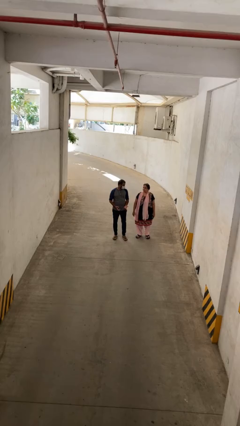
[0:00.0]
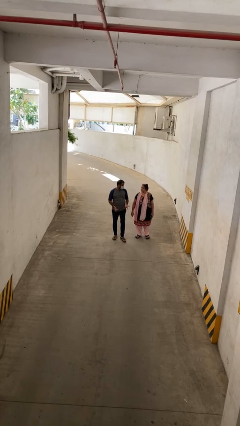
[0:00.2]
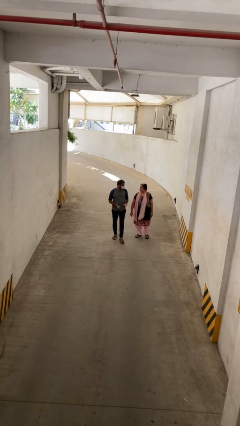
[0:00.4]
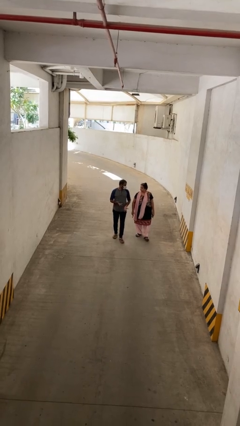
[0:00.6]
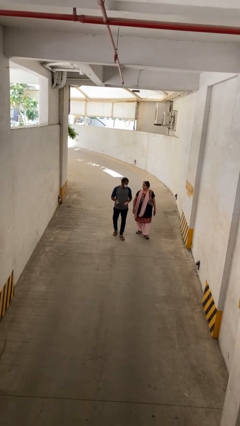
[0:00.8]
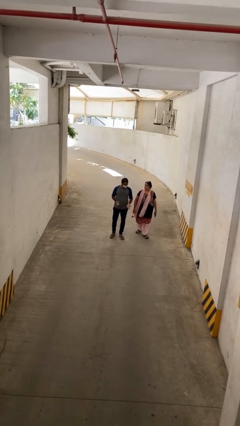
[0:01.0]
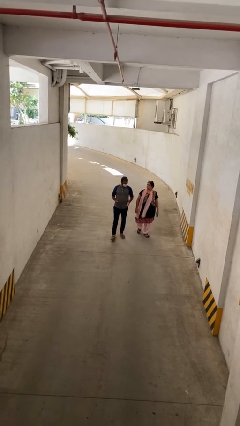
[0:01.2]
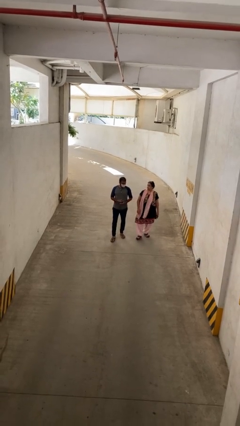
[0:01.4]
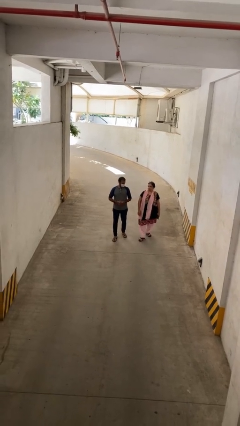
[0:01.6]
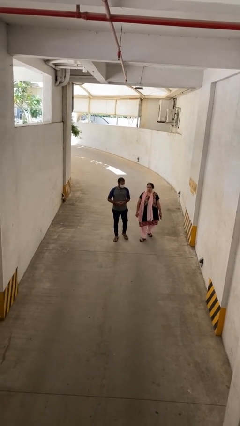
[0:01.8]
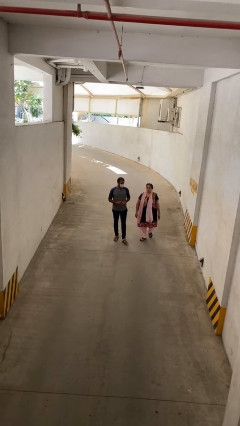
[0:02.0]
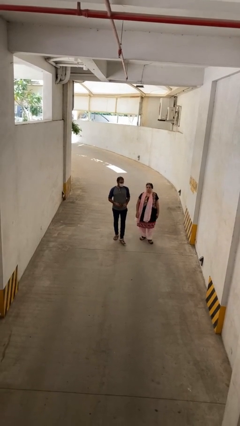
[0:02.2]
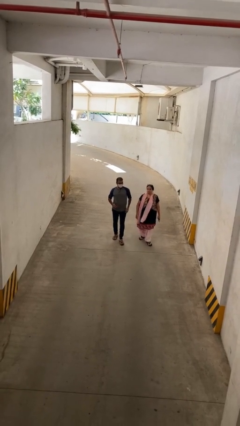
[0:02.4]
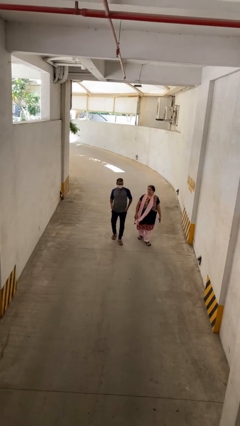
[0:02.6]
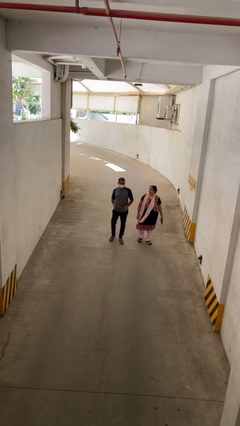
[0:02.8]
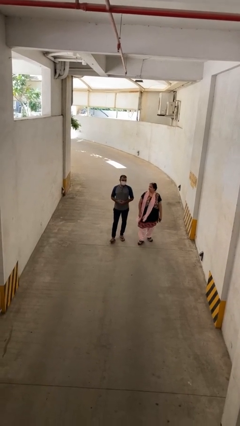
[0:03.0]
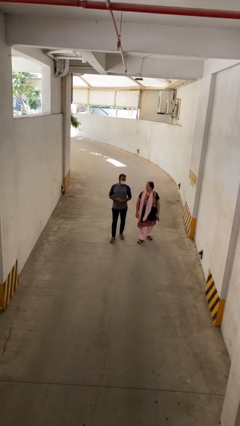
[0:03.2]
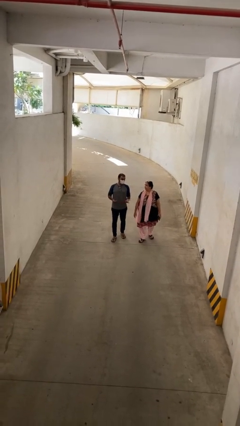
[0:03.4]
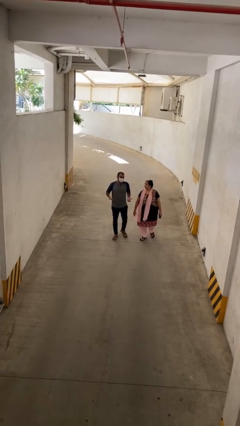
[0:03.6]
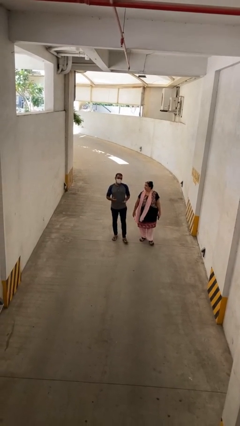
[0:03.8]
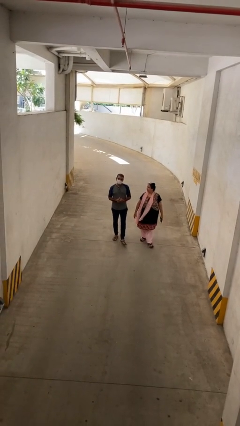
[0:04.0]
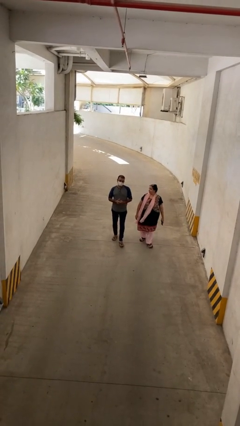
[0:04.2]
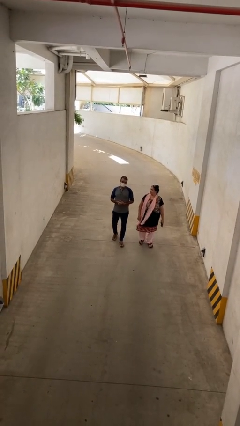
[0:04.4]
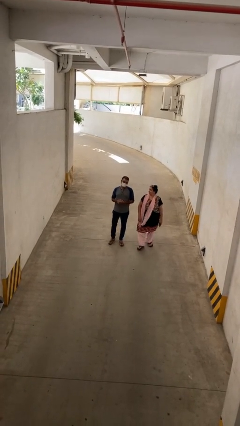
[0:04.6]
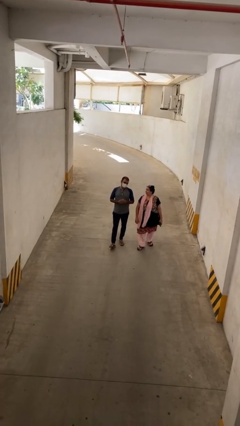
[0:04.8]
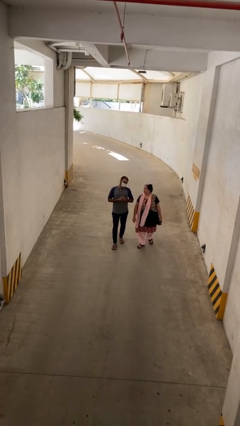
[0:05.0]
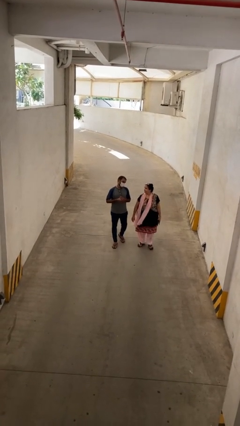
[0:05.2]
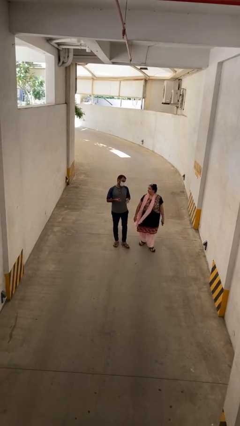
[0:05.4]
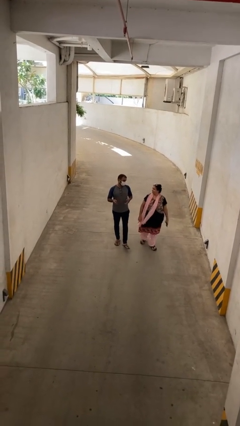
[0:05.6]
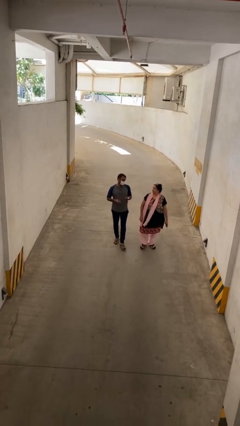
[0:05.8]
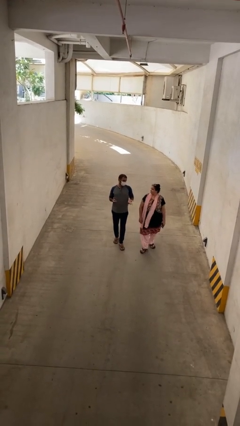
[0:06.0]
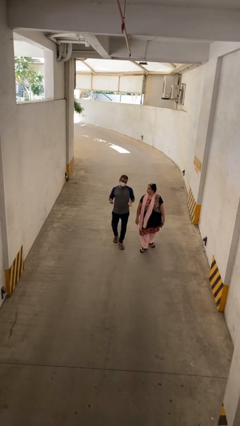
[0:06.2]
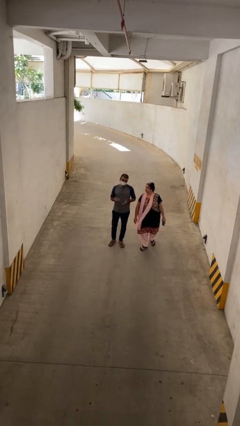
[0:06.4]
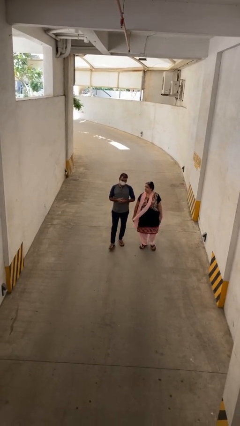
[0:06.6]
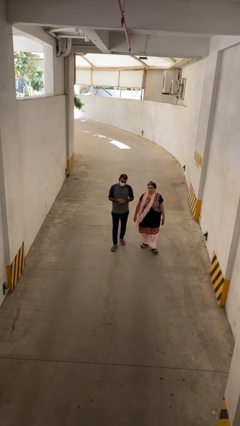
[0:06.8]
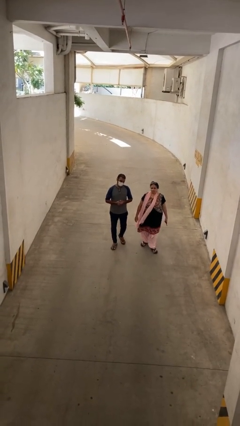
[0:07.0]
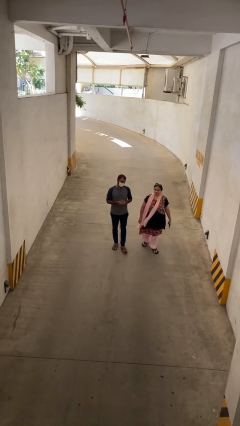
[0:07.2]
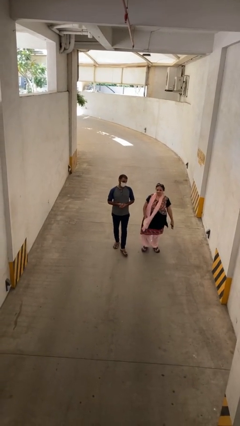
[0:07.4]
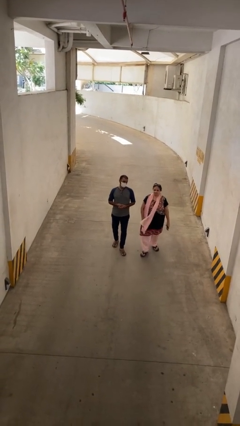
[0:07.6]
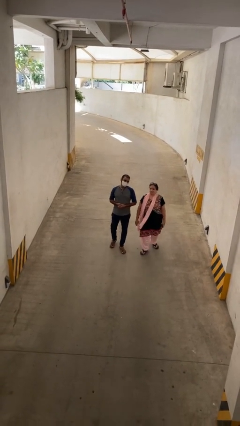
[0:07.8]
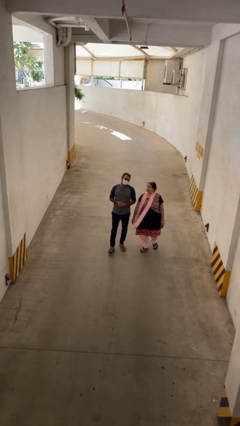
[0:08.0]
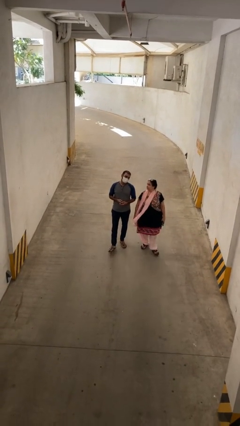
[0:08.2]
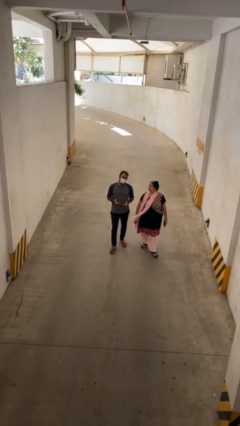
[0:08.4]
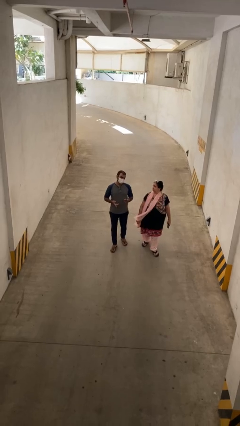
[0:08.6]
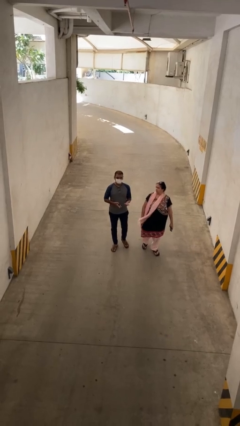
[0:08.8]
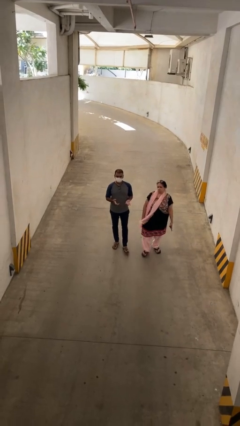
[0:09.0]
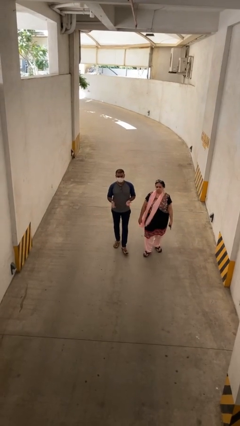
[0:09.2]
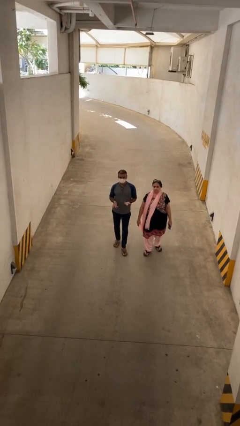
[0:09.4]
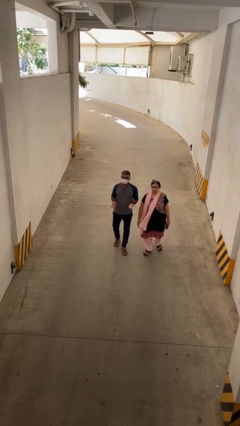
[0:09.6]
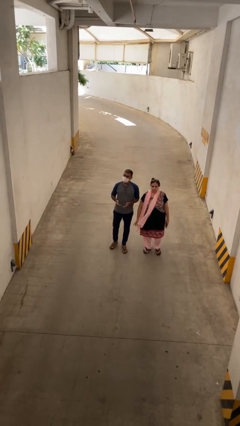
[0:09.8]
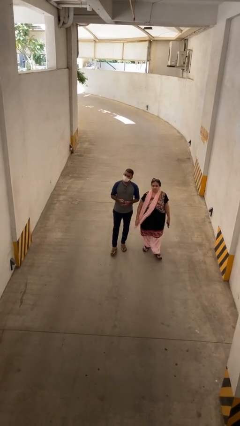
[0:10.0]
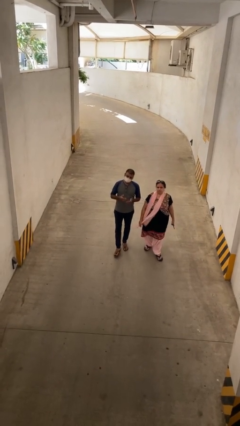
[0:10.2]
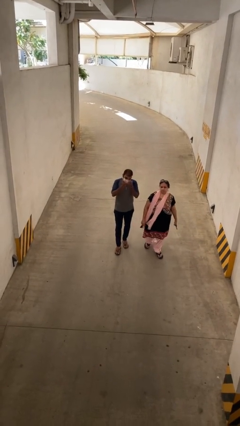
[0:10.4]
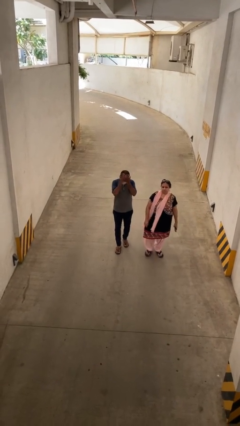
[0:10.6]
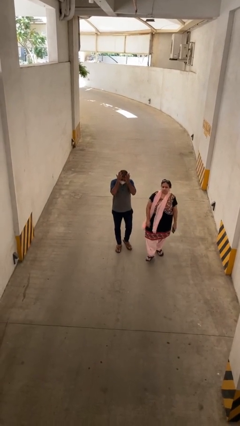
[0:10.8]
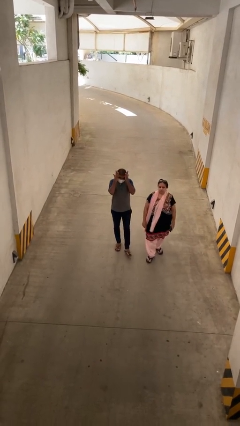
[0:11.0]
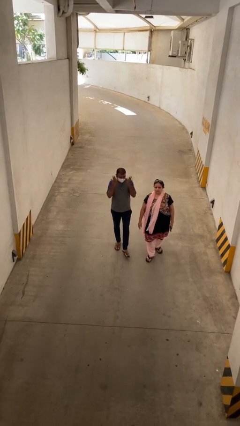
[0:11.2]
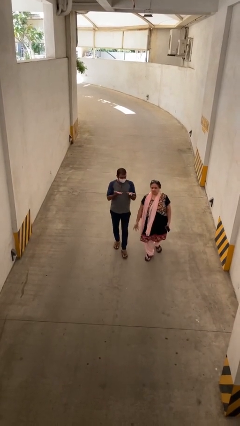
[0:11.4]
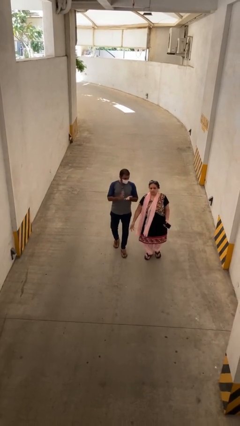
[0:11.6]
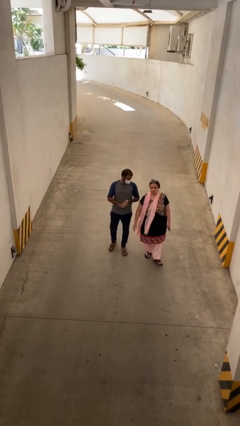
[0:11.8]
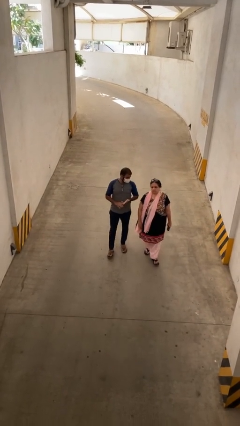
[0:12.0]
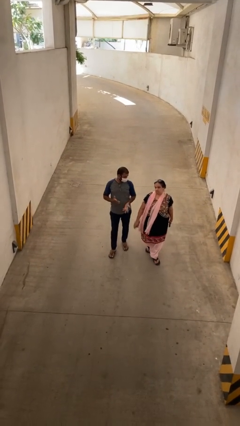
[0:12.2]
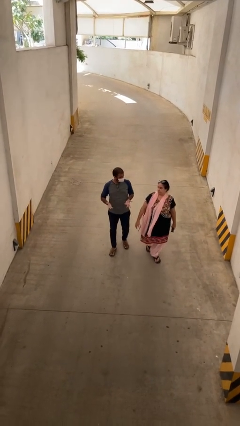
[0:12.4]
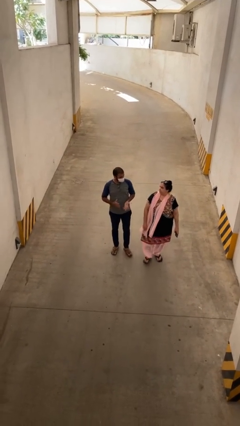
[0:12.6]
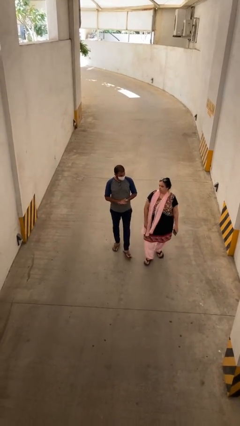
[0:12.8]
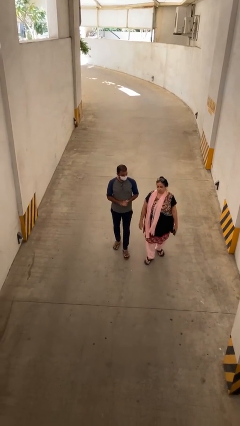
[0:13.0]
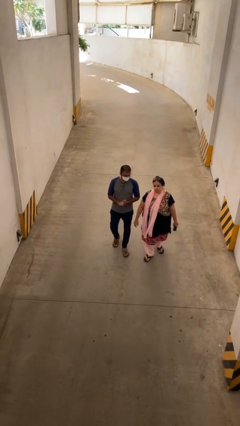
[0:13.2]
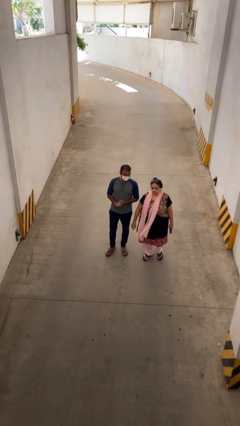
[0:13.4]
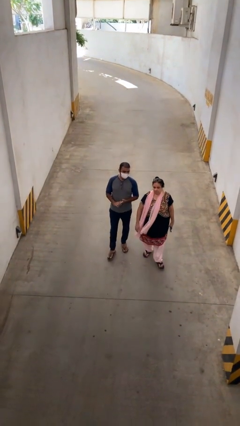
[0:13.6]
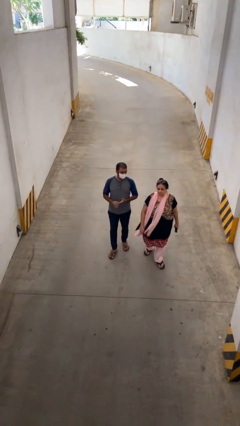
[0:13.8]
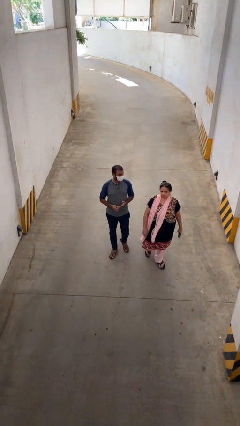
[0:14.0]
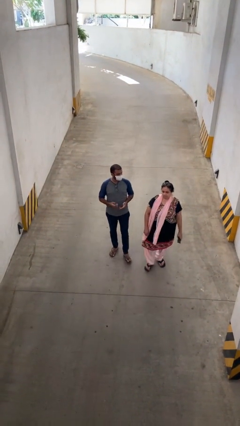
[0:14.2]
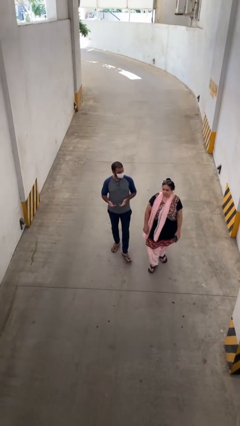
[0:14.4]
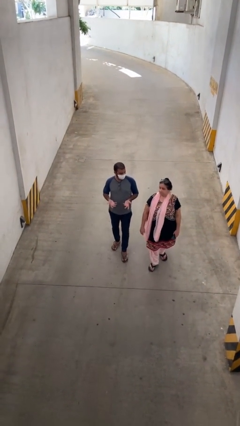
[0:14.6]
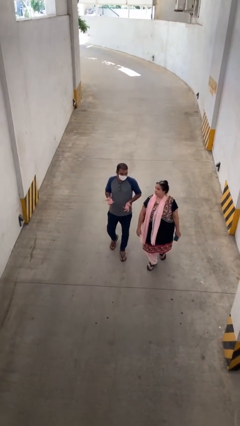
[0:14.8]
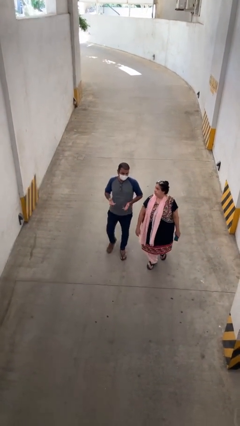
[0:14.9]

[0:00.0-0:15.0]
person talks to person

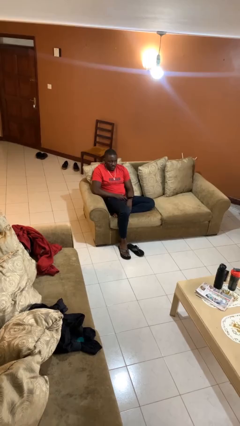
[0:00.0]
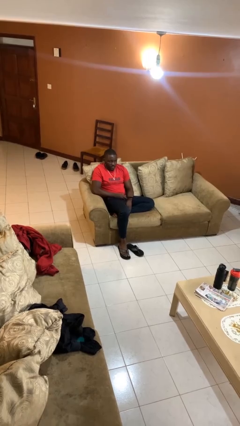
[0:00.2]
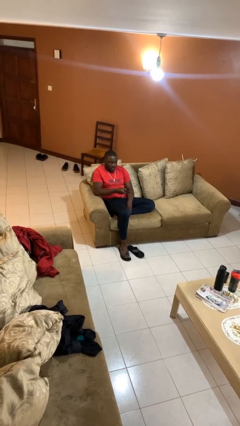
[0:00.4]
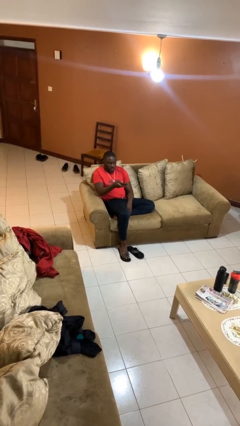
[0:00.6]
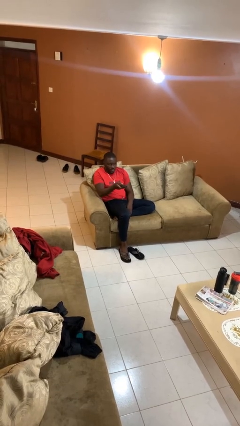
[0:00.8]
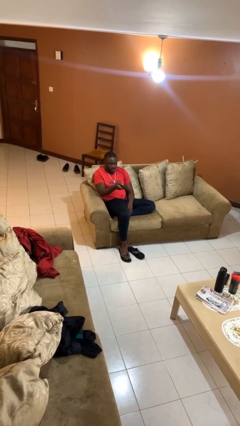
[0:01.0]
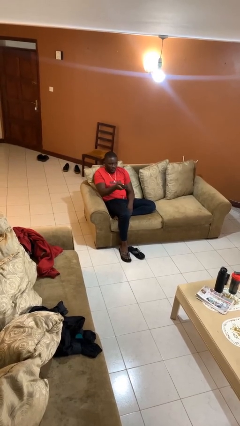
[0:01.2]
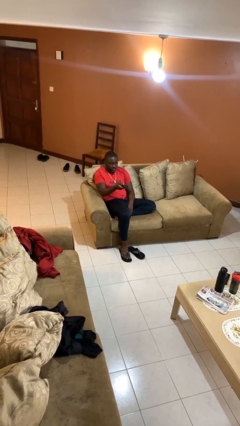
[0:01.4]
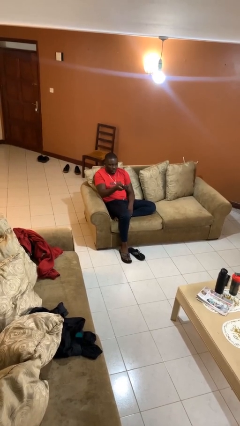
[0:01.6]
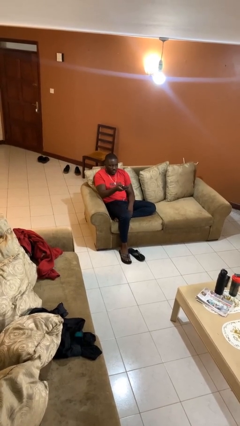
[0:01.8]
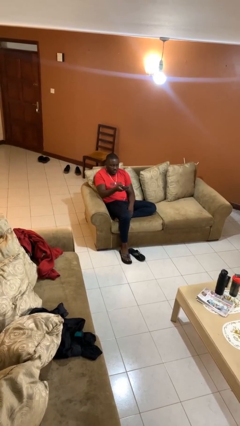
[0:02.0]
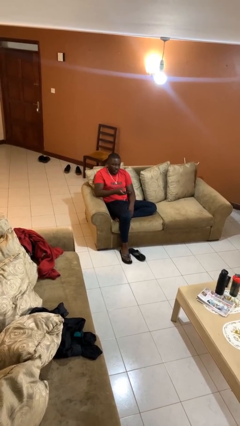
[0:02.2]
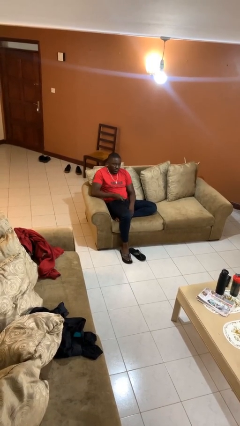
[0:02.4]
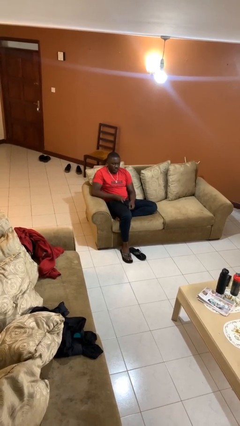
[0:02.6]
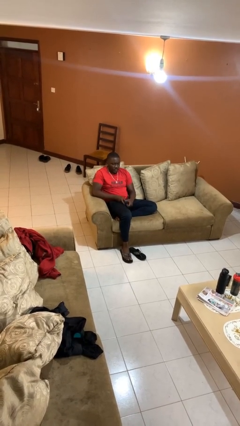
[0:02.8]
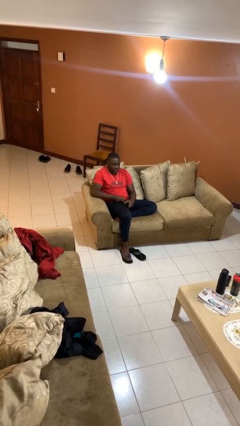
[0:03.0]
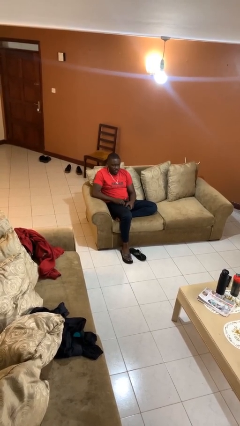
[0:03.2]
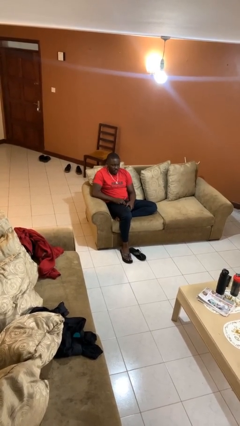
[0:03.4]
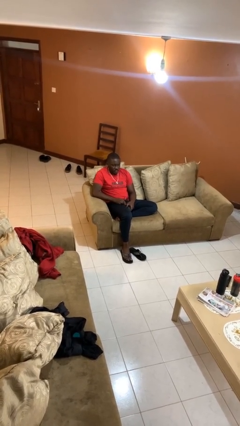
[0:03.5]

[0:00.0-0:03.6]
person uses television remote
